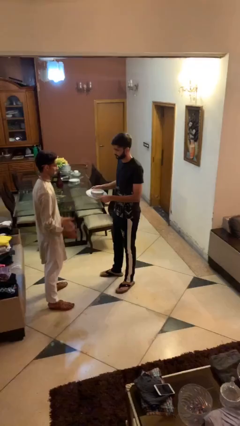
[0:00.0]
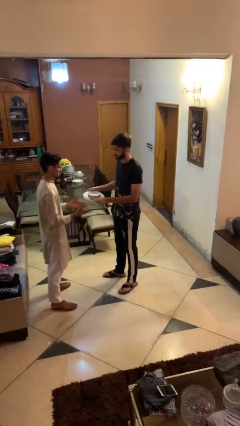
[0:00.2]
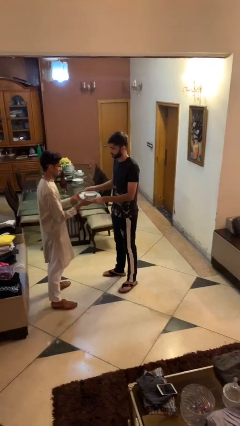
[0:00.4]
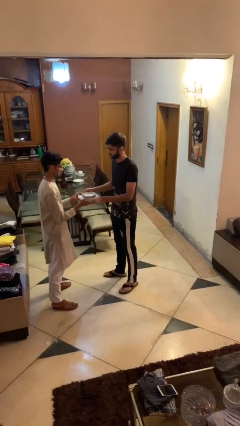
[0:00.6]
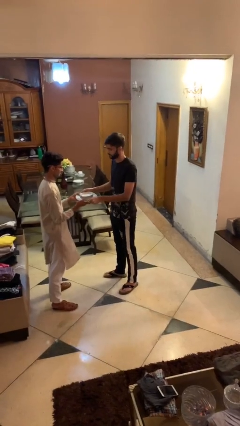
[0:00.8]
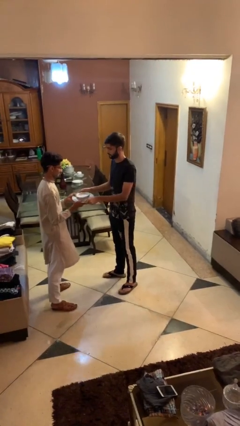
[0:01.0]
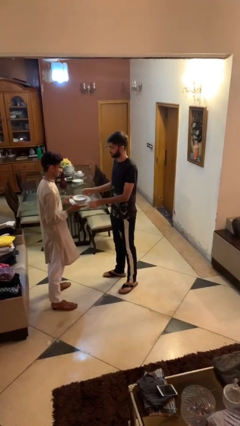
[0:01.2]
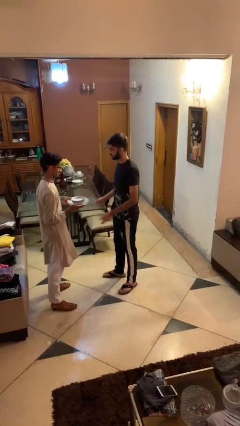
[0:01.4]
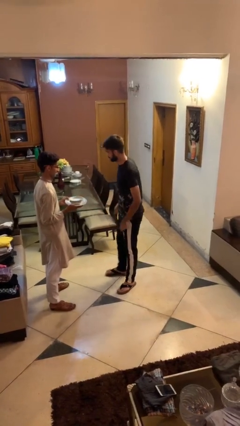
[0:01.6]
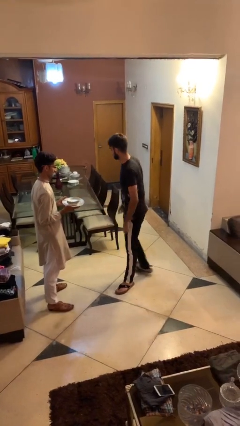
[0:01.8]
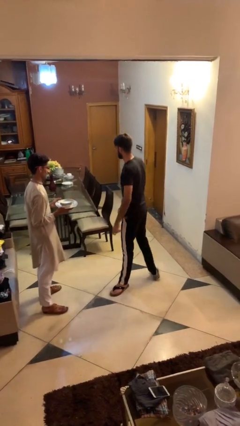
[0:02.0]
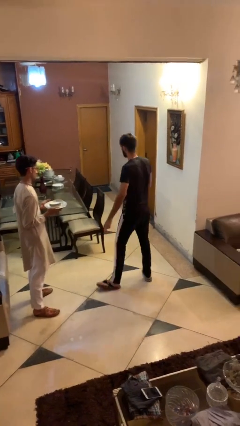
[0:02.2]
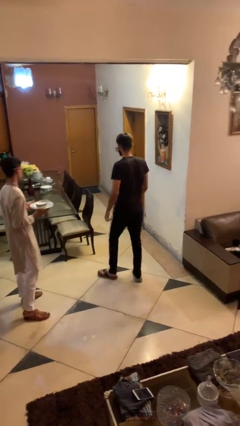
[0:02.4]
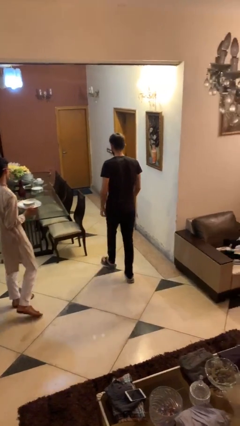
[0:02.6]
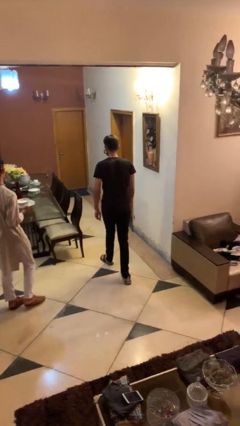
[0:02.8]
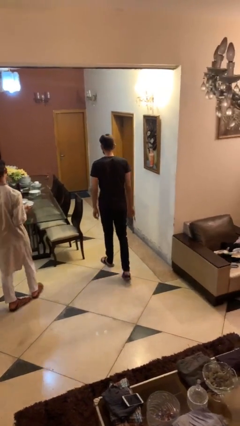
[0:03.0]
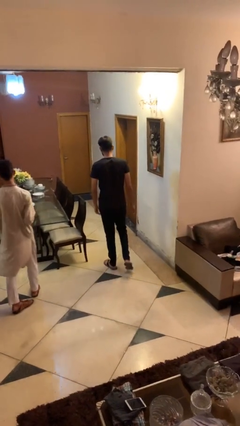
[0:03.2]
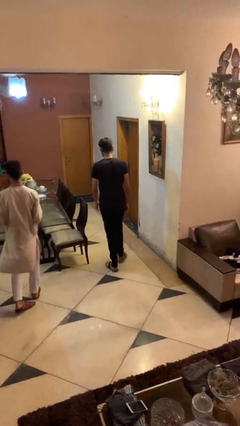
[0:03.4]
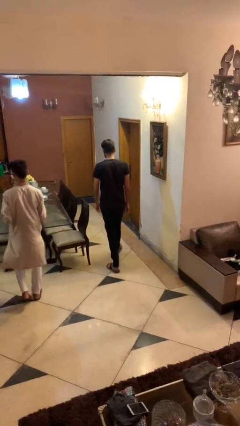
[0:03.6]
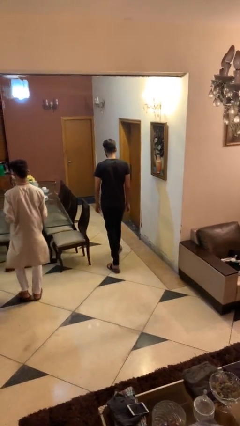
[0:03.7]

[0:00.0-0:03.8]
person transfers object to person

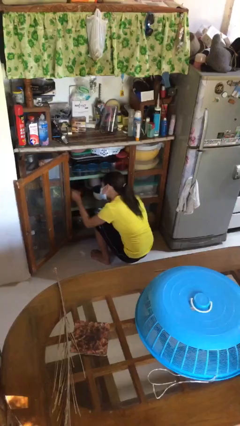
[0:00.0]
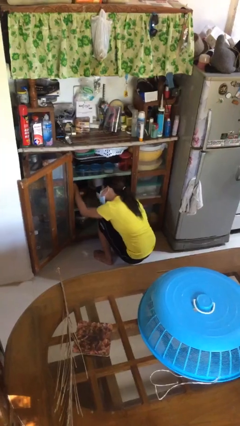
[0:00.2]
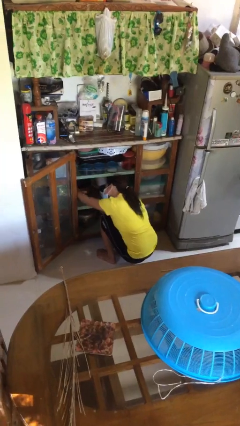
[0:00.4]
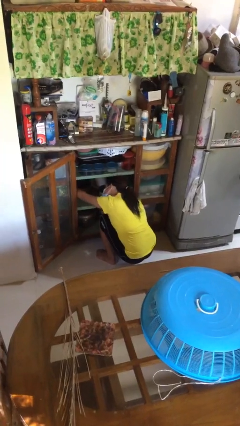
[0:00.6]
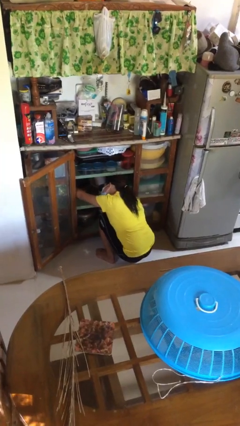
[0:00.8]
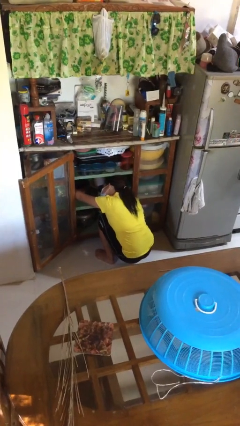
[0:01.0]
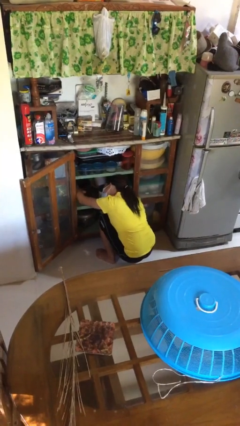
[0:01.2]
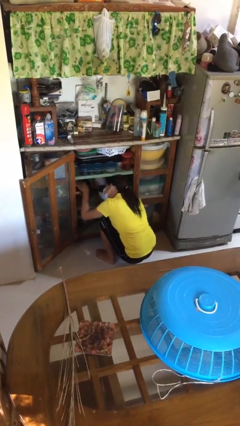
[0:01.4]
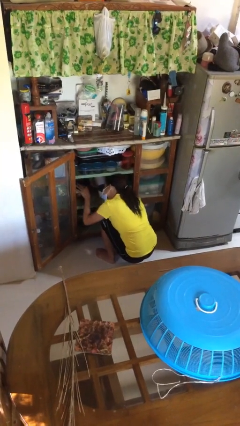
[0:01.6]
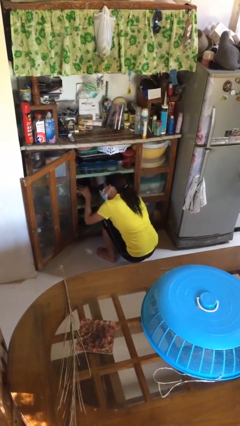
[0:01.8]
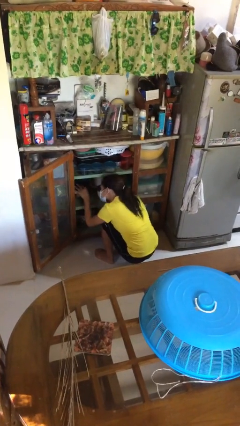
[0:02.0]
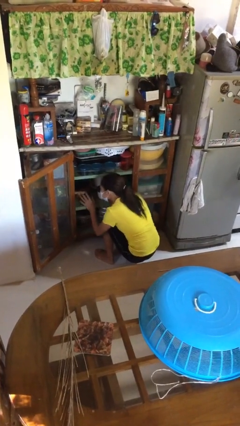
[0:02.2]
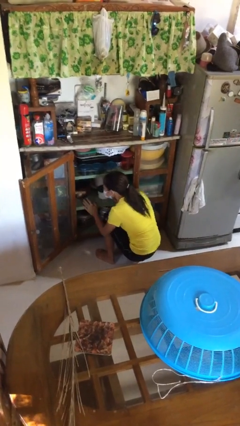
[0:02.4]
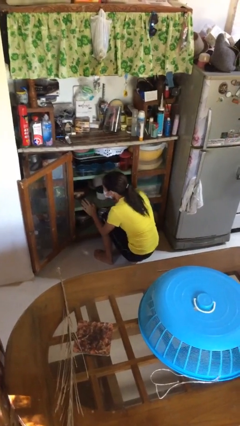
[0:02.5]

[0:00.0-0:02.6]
person searches in cabinet

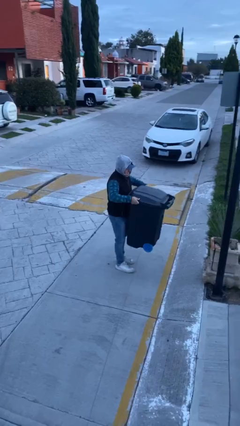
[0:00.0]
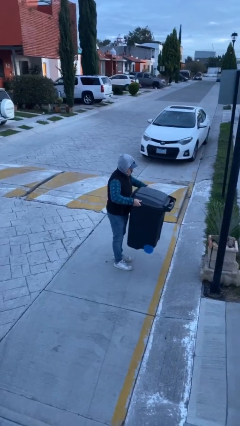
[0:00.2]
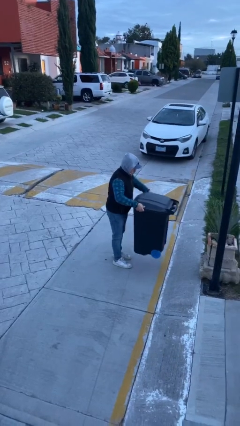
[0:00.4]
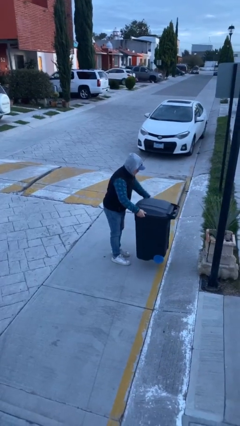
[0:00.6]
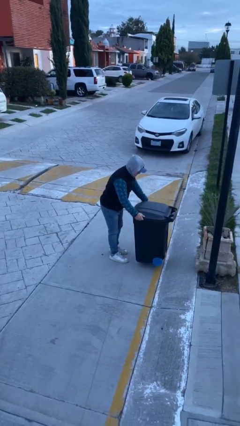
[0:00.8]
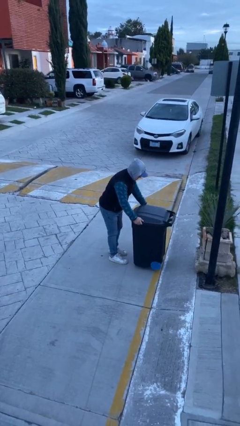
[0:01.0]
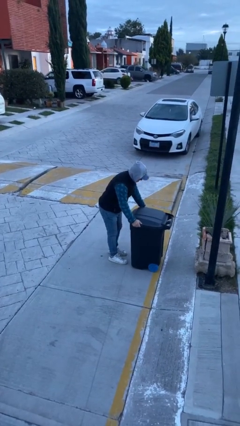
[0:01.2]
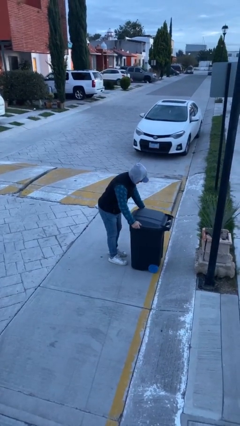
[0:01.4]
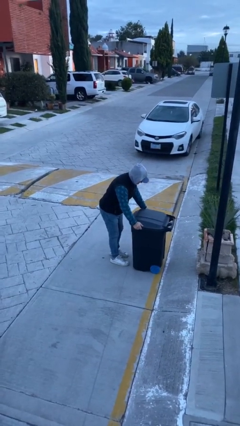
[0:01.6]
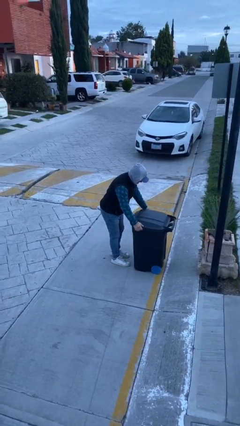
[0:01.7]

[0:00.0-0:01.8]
person puts down object on floor

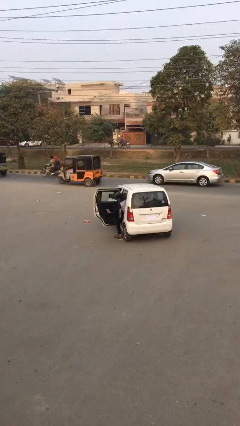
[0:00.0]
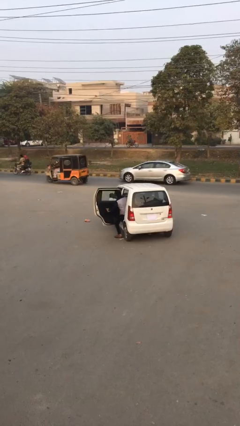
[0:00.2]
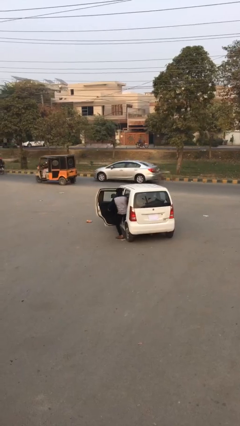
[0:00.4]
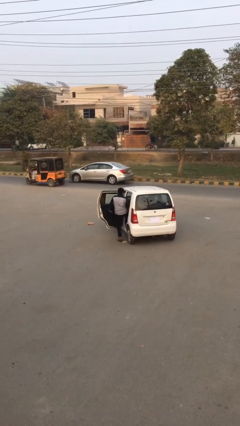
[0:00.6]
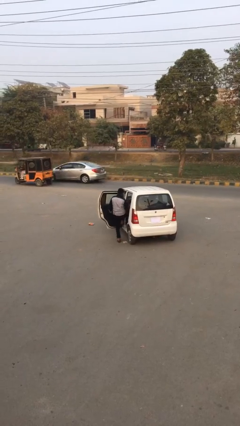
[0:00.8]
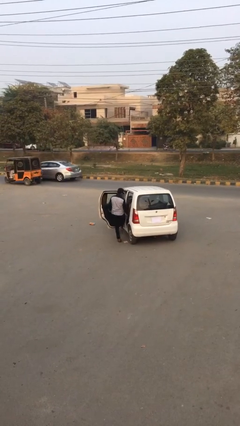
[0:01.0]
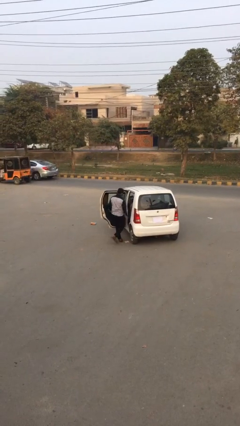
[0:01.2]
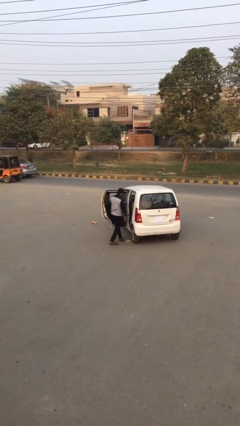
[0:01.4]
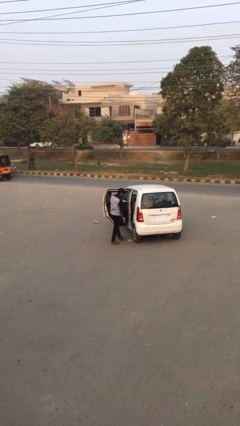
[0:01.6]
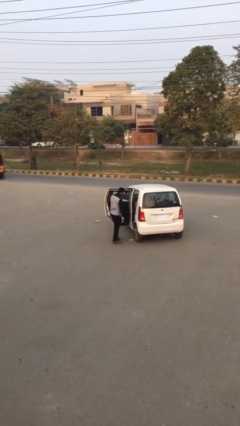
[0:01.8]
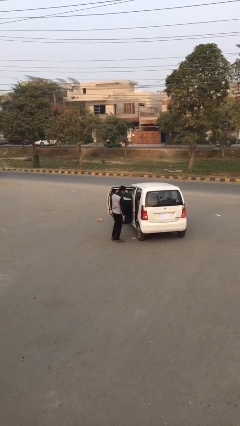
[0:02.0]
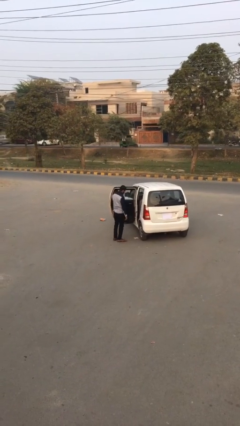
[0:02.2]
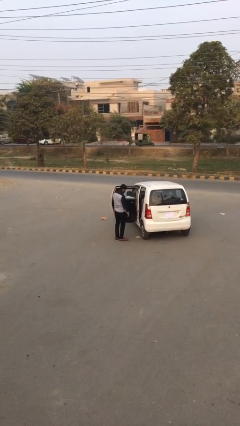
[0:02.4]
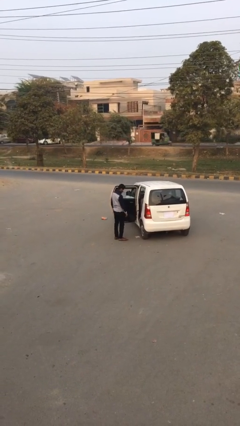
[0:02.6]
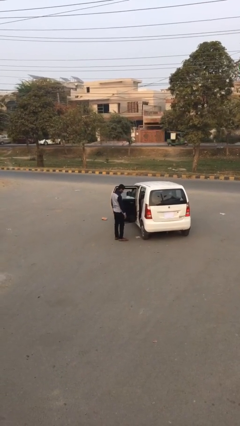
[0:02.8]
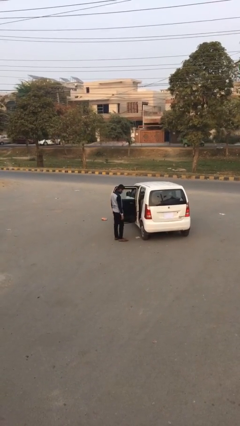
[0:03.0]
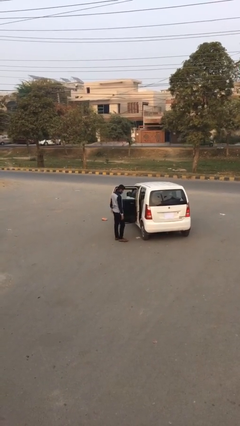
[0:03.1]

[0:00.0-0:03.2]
person exits car

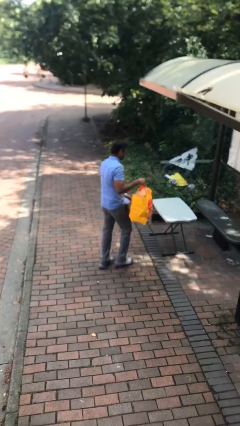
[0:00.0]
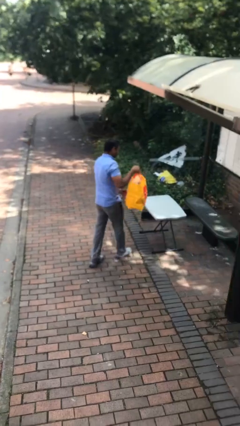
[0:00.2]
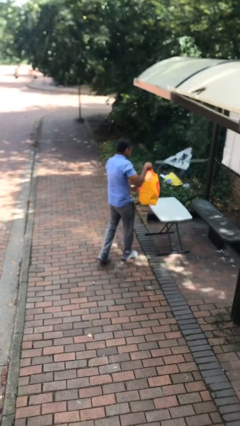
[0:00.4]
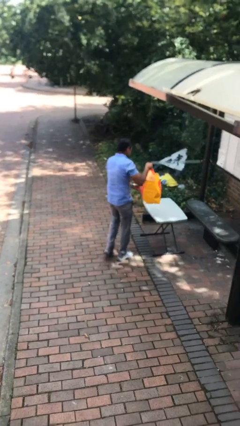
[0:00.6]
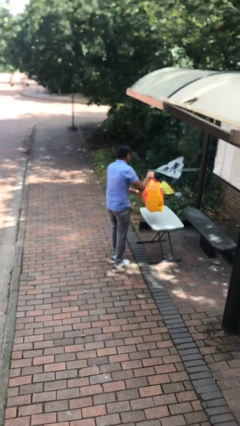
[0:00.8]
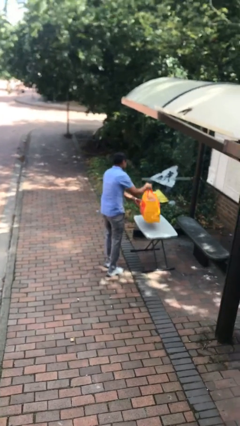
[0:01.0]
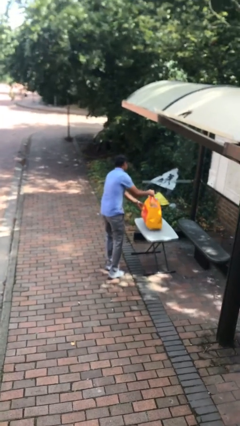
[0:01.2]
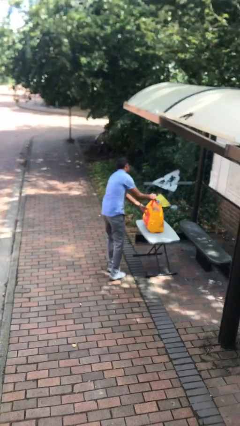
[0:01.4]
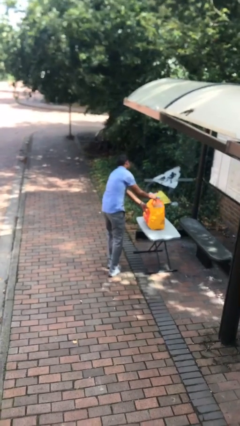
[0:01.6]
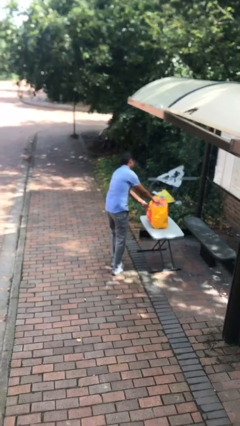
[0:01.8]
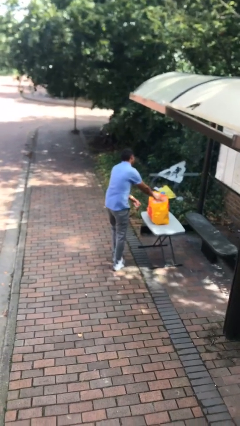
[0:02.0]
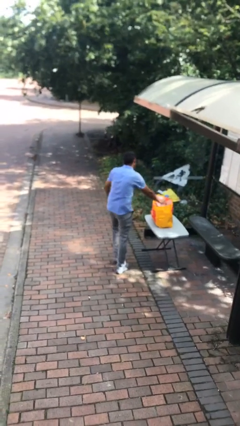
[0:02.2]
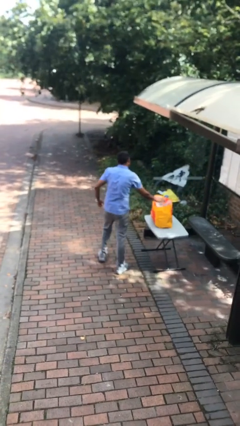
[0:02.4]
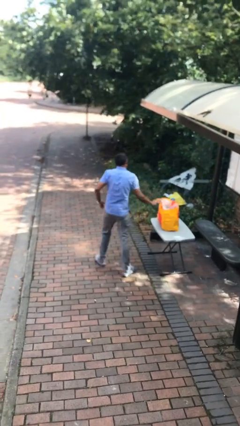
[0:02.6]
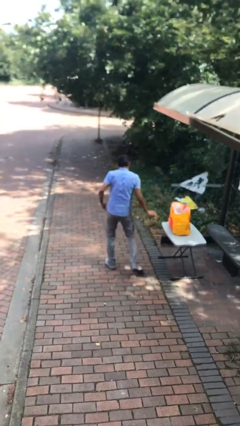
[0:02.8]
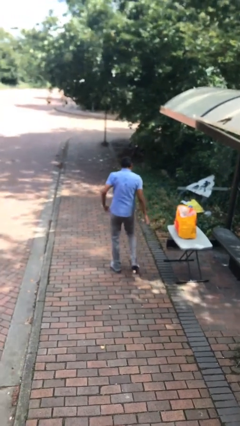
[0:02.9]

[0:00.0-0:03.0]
person puts down object on table

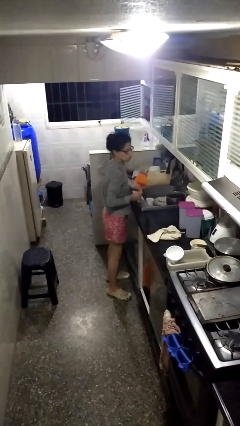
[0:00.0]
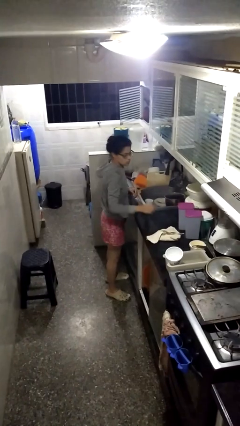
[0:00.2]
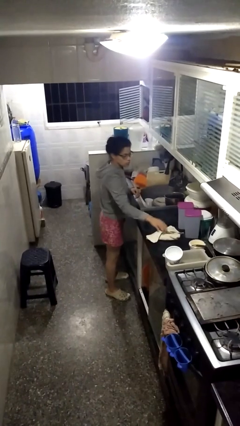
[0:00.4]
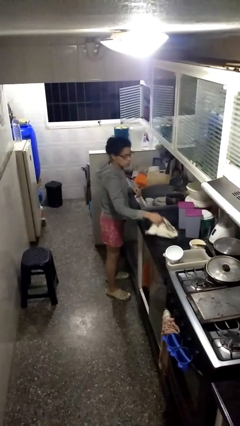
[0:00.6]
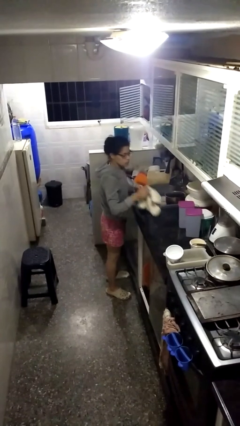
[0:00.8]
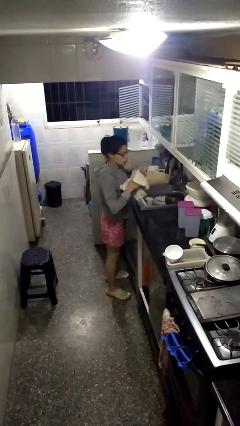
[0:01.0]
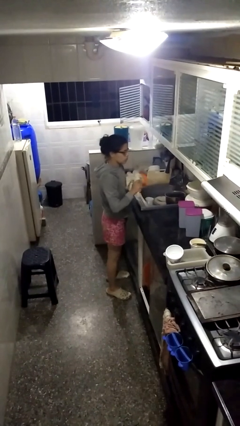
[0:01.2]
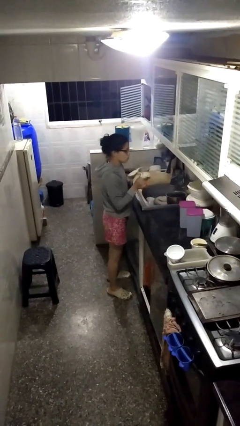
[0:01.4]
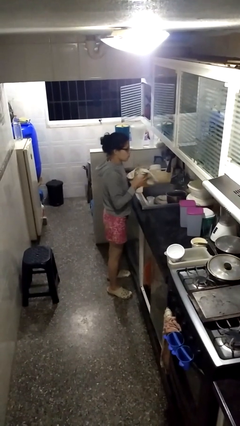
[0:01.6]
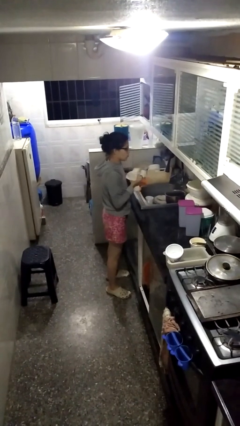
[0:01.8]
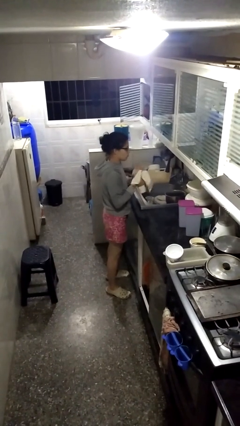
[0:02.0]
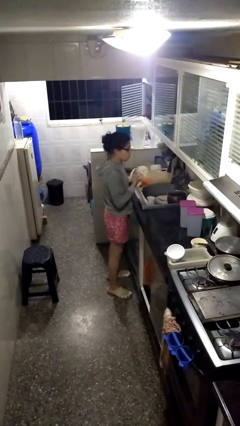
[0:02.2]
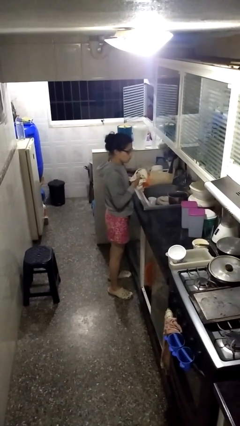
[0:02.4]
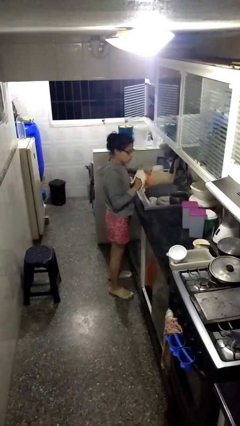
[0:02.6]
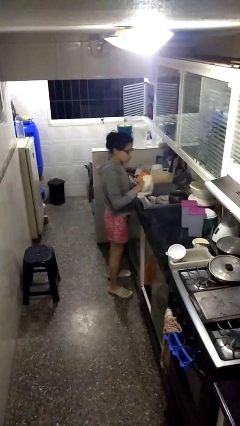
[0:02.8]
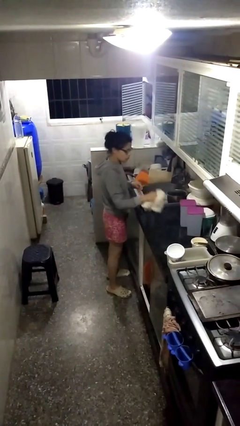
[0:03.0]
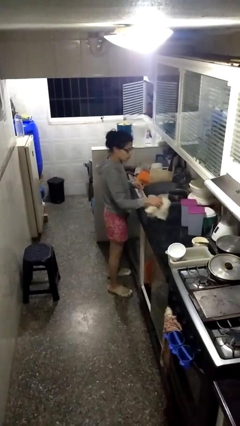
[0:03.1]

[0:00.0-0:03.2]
person dries hands with towel
